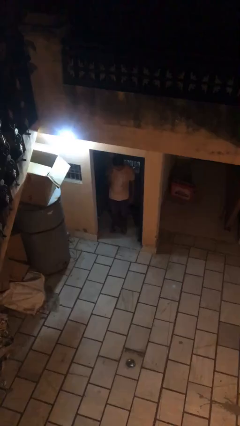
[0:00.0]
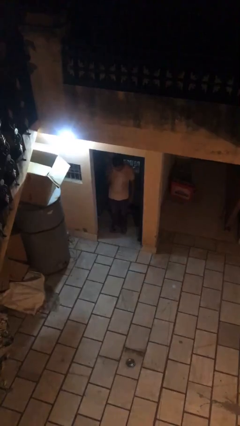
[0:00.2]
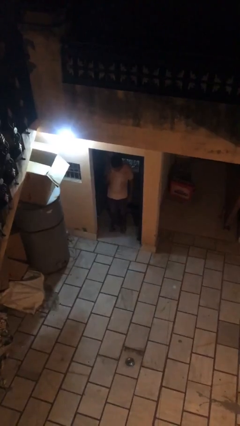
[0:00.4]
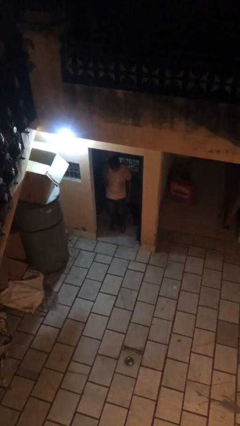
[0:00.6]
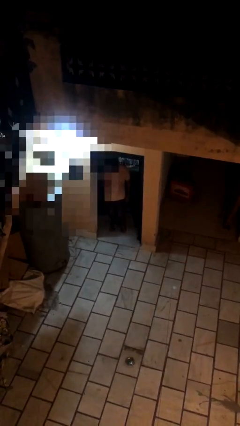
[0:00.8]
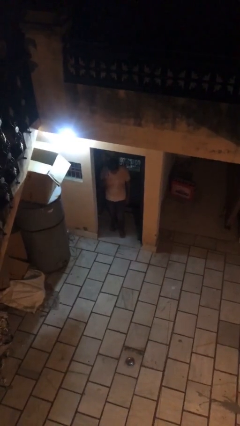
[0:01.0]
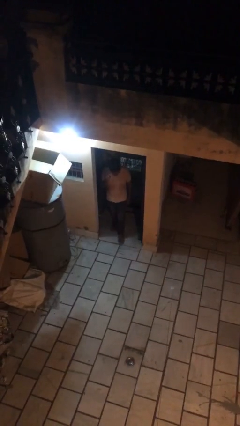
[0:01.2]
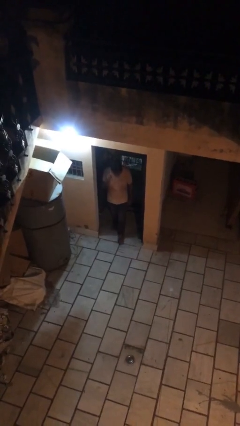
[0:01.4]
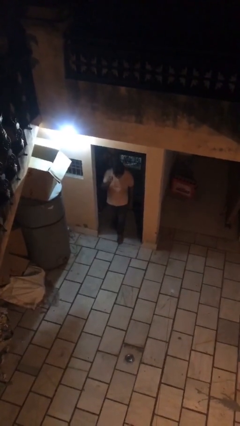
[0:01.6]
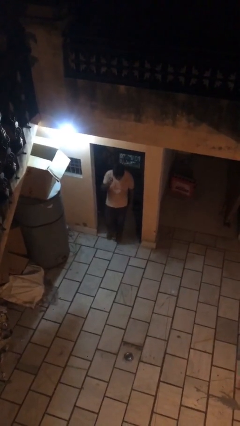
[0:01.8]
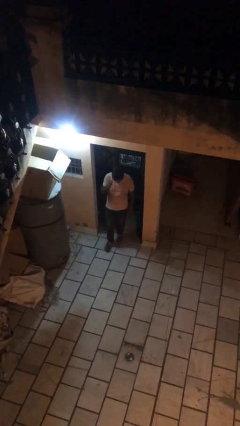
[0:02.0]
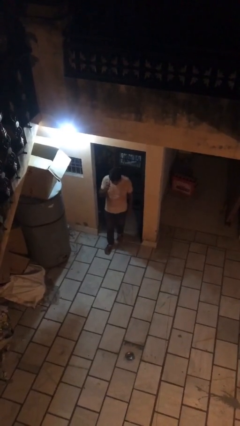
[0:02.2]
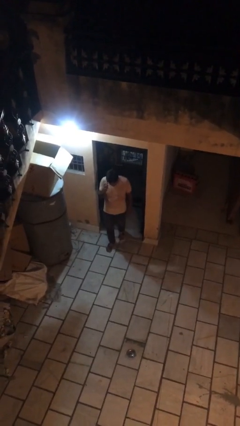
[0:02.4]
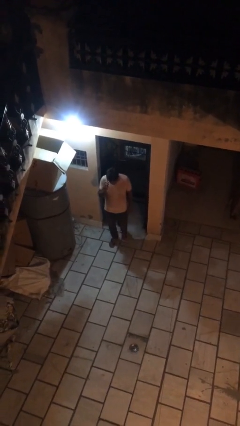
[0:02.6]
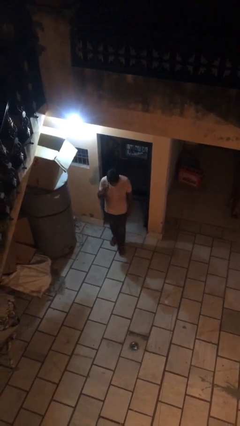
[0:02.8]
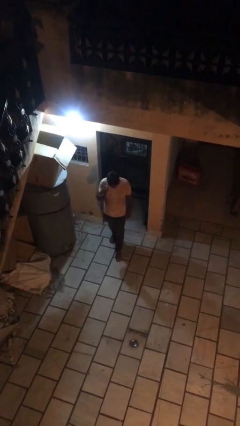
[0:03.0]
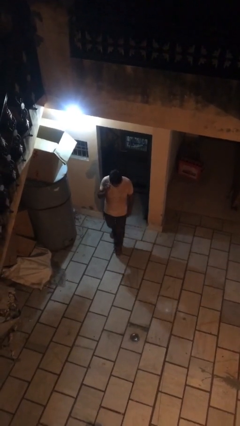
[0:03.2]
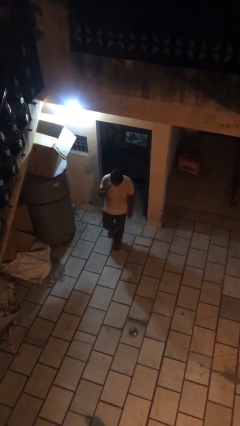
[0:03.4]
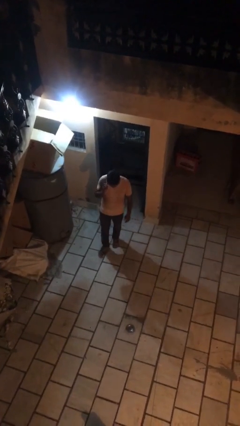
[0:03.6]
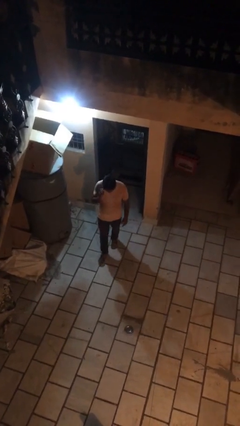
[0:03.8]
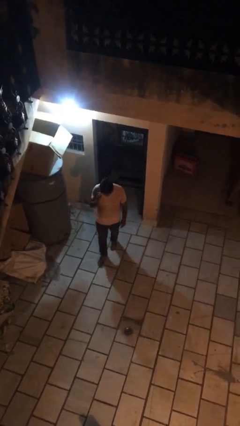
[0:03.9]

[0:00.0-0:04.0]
person enters scene through structure

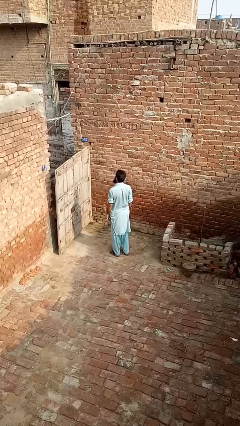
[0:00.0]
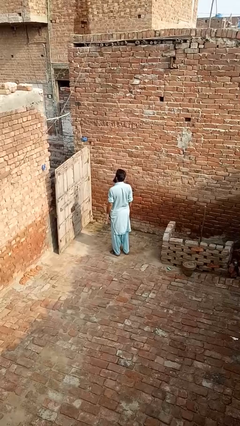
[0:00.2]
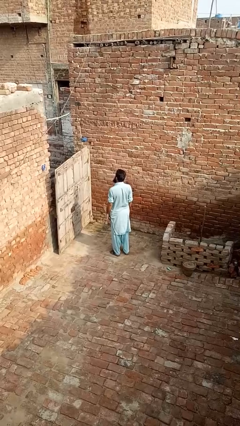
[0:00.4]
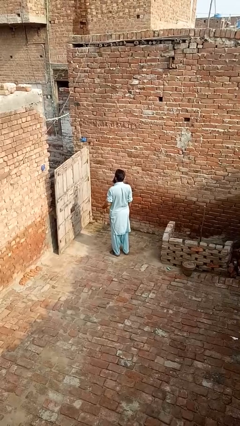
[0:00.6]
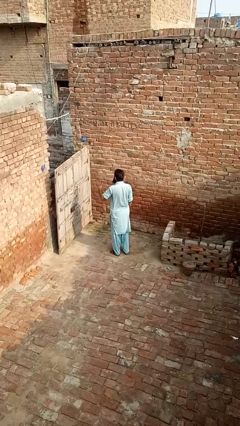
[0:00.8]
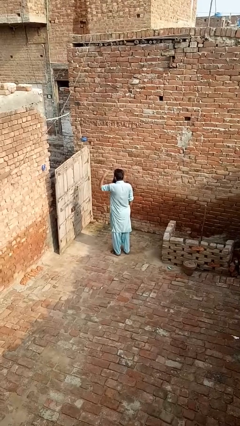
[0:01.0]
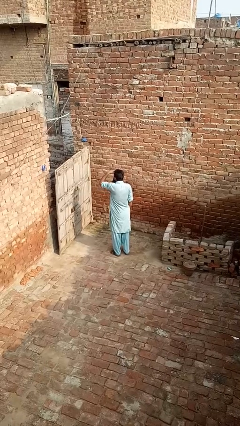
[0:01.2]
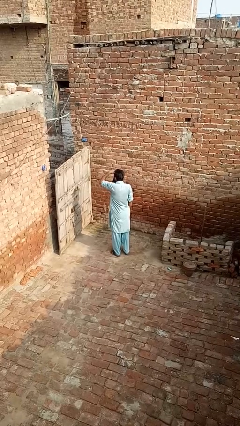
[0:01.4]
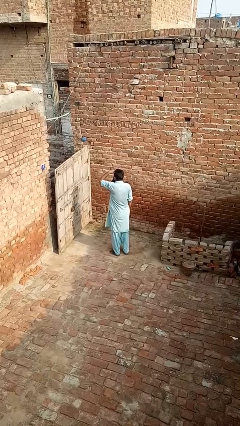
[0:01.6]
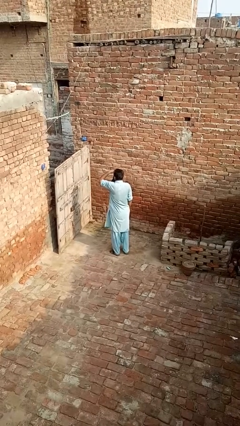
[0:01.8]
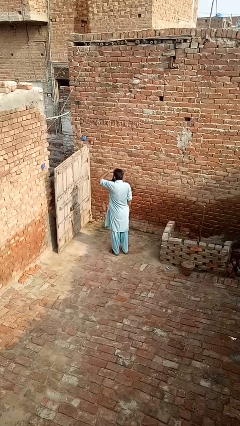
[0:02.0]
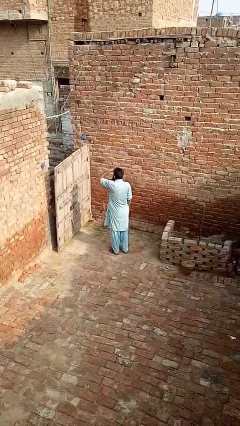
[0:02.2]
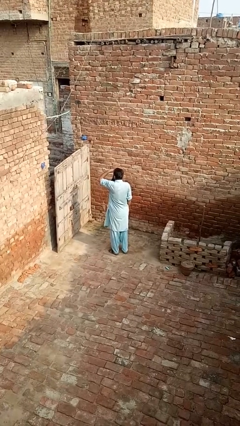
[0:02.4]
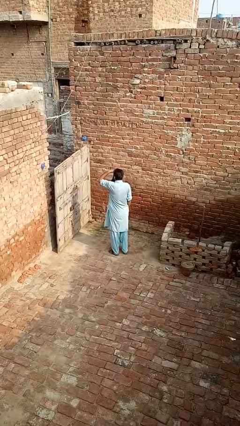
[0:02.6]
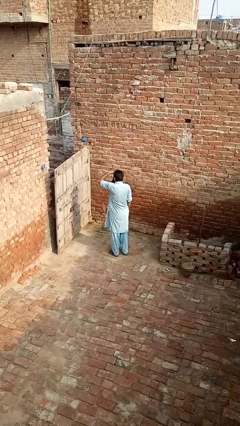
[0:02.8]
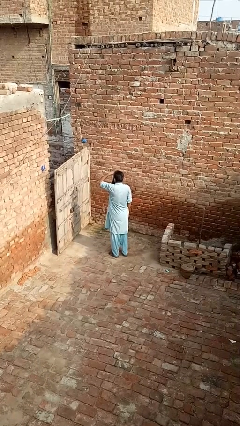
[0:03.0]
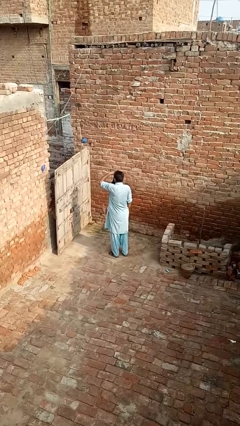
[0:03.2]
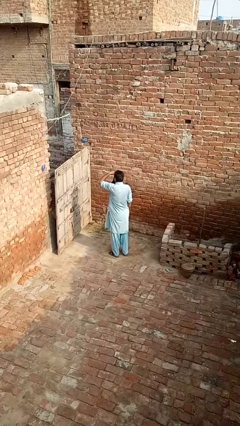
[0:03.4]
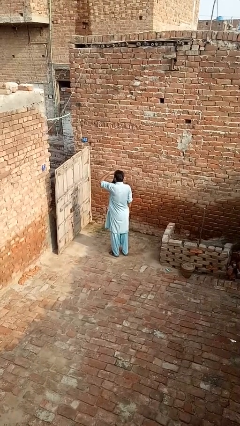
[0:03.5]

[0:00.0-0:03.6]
person shades eyes

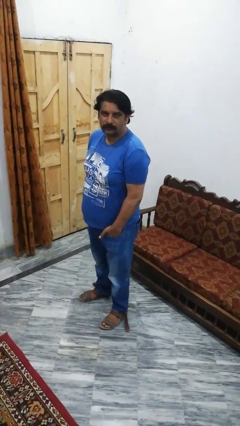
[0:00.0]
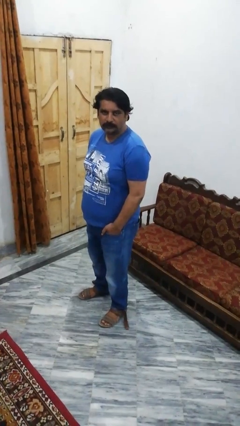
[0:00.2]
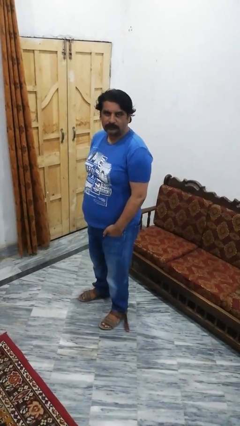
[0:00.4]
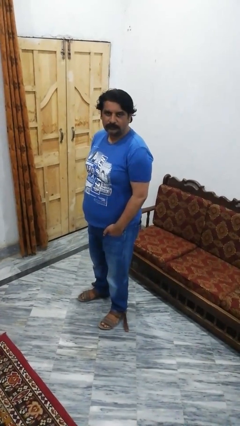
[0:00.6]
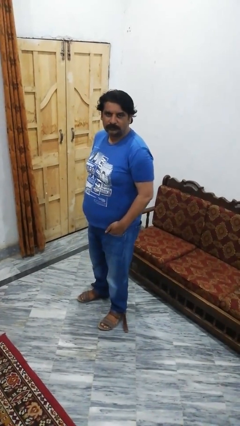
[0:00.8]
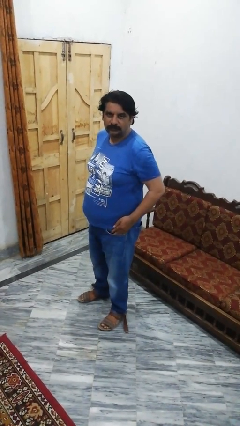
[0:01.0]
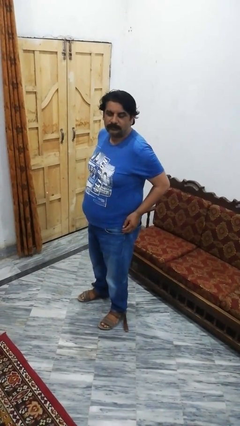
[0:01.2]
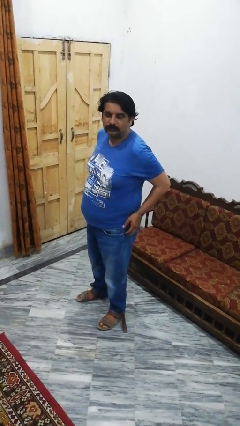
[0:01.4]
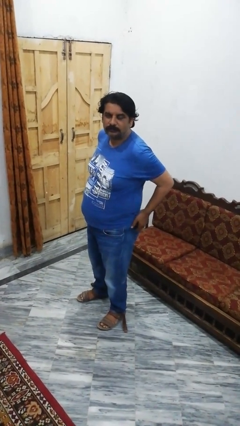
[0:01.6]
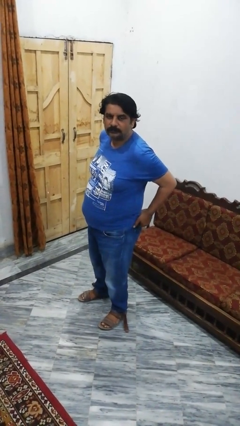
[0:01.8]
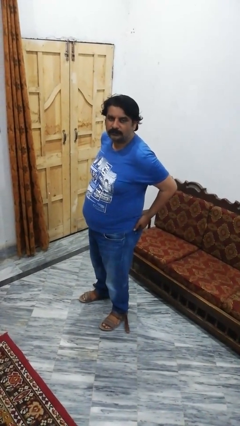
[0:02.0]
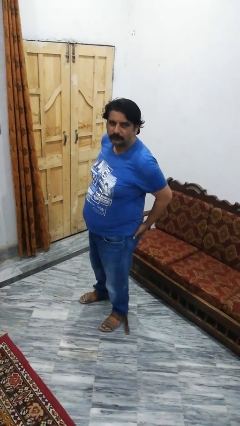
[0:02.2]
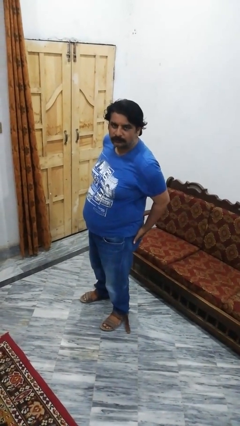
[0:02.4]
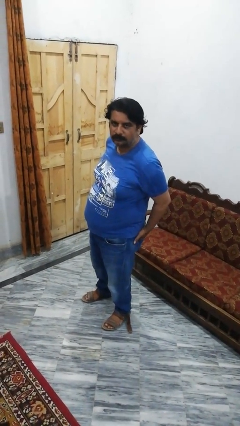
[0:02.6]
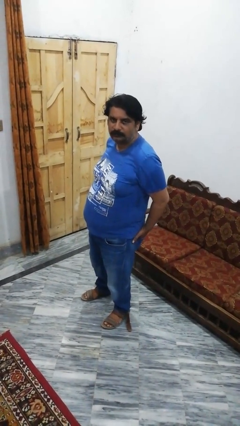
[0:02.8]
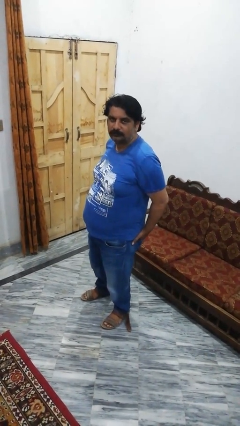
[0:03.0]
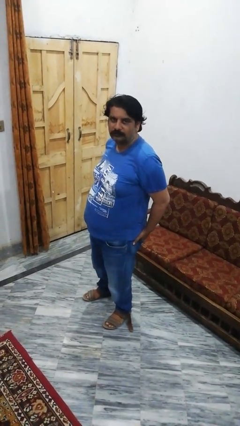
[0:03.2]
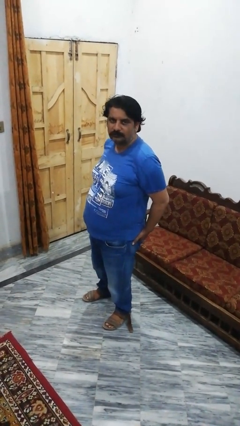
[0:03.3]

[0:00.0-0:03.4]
person puts hands in back pockets

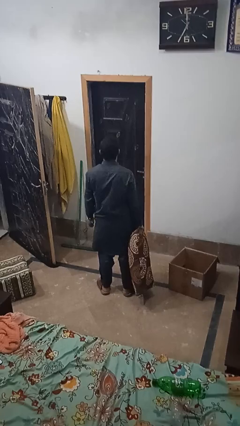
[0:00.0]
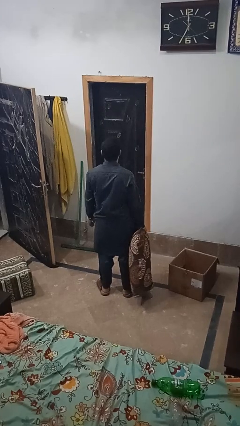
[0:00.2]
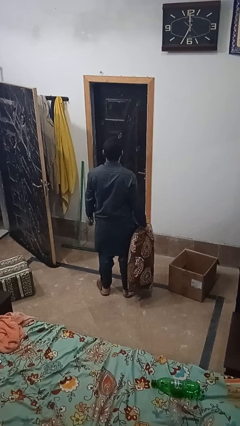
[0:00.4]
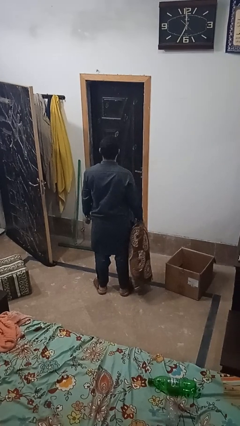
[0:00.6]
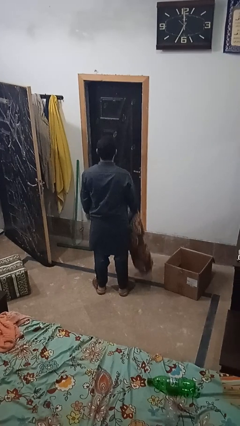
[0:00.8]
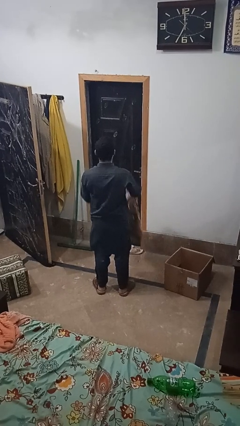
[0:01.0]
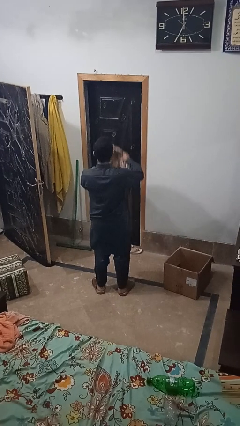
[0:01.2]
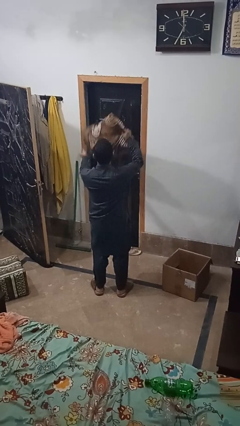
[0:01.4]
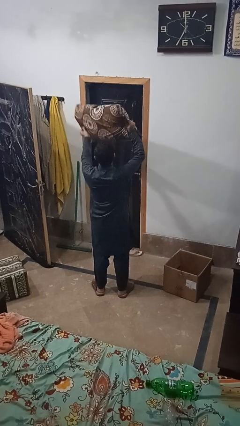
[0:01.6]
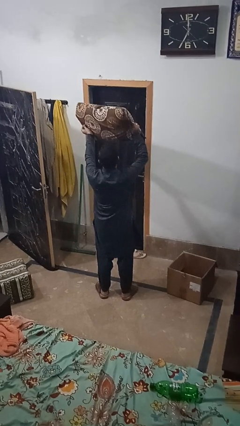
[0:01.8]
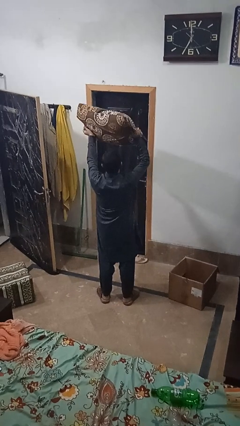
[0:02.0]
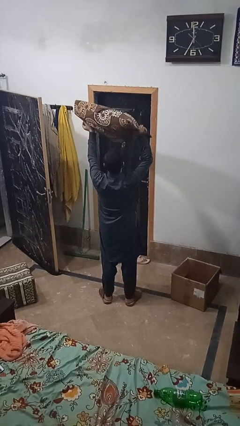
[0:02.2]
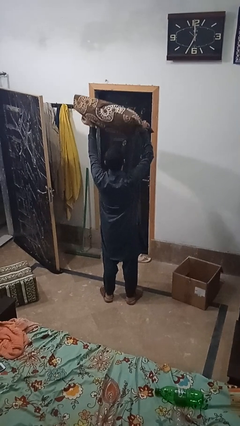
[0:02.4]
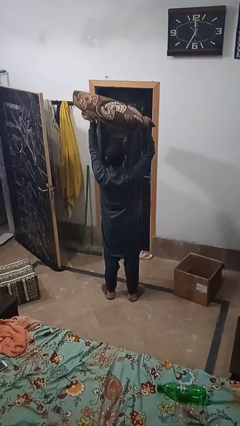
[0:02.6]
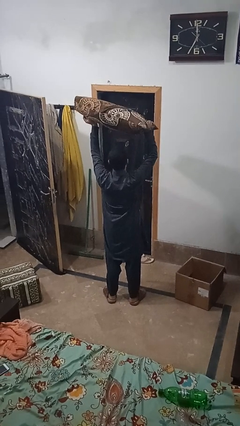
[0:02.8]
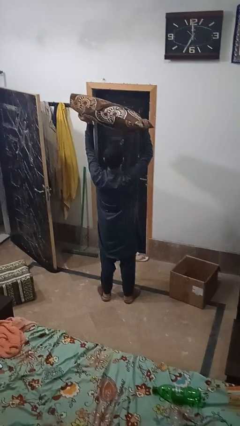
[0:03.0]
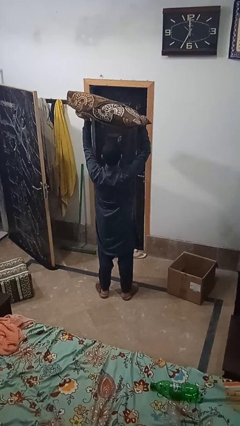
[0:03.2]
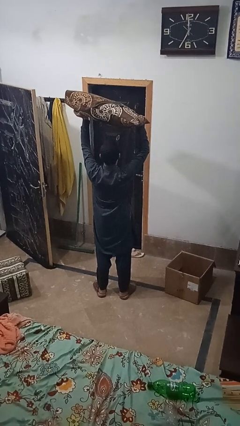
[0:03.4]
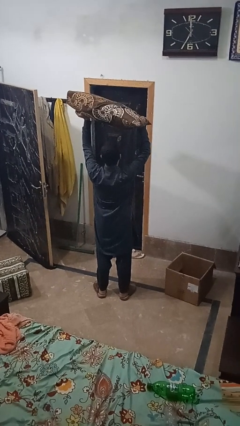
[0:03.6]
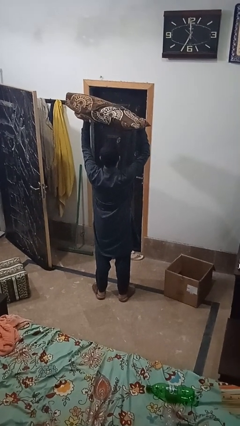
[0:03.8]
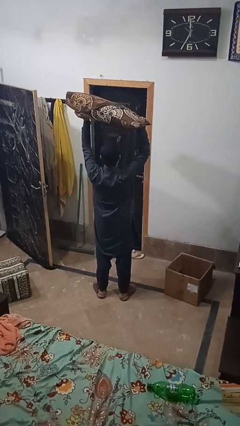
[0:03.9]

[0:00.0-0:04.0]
person holds object above head

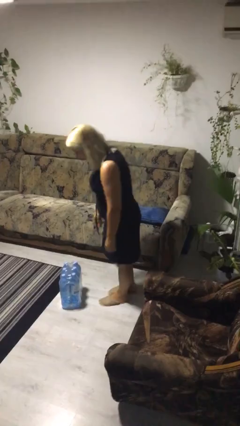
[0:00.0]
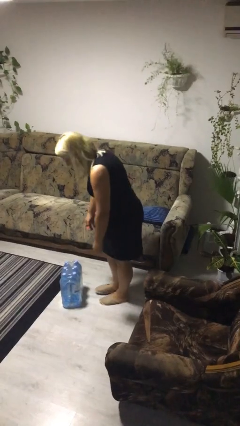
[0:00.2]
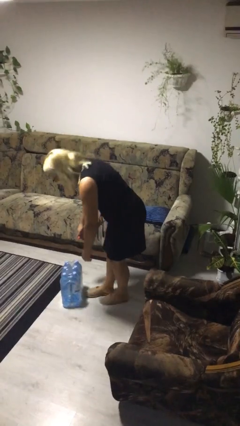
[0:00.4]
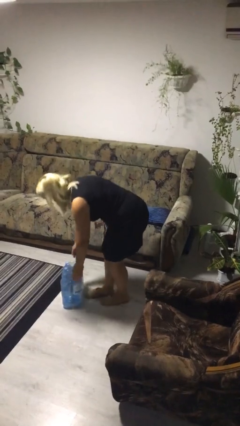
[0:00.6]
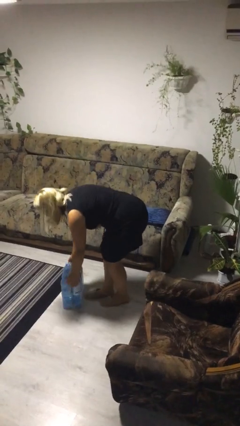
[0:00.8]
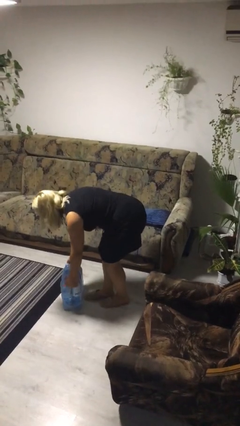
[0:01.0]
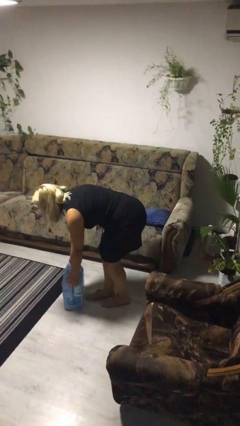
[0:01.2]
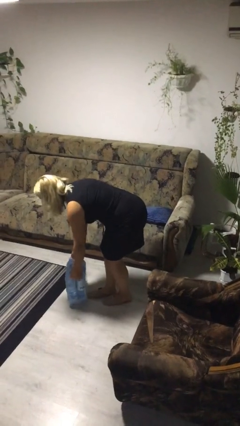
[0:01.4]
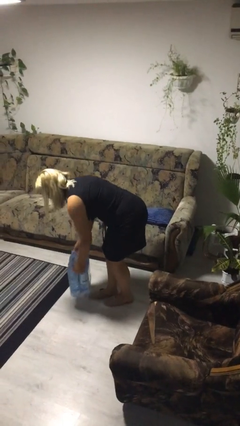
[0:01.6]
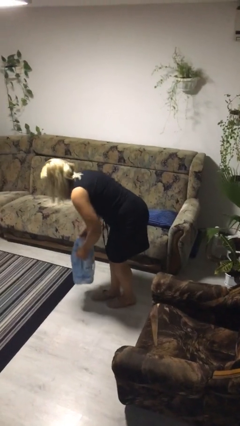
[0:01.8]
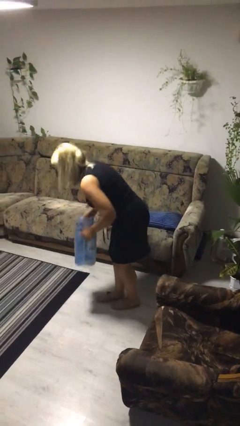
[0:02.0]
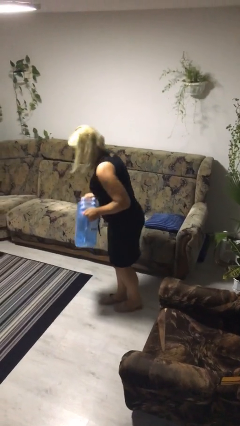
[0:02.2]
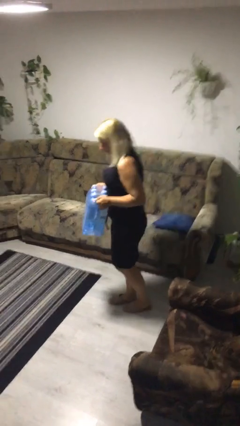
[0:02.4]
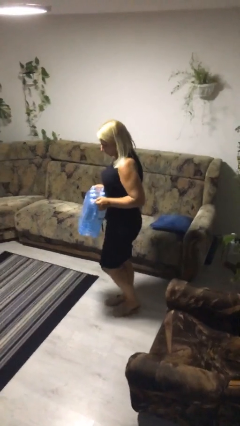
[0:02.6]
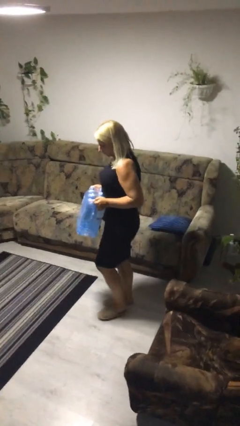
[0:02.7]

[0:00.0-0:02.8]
person picks up object from floor
